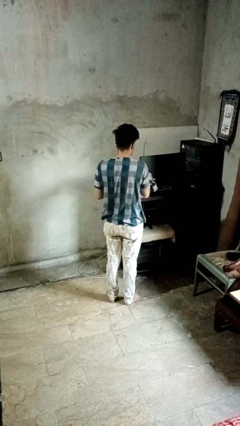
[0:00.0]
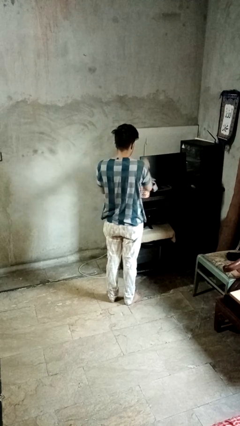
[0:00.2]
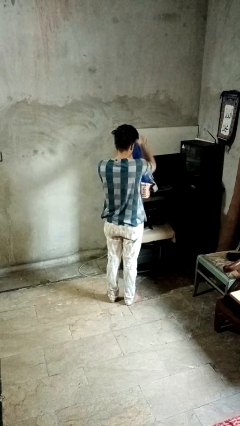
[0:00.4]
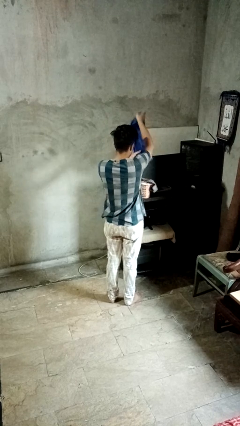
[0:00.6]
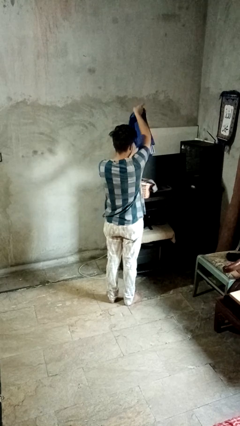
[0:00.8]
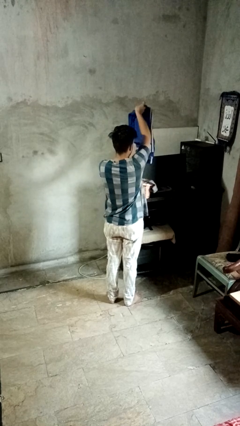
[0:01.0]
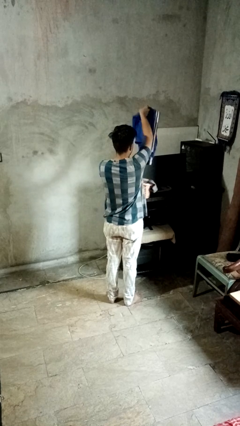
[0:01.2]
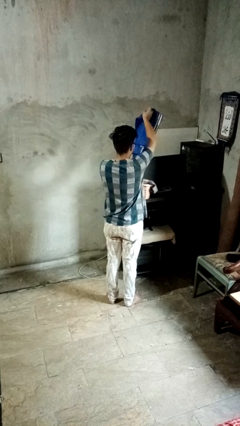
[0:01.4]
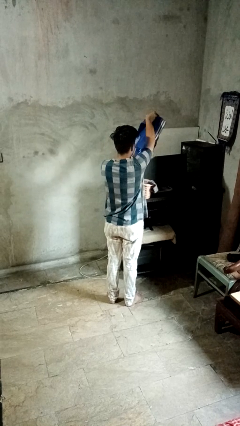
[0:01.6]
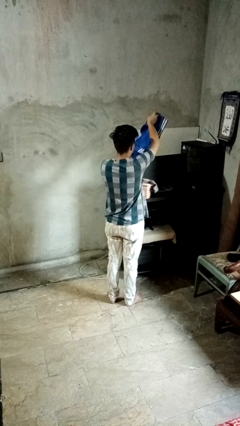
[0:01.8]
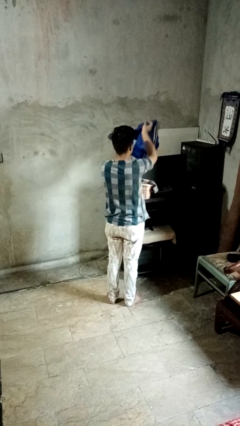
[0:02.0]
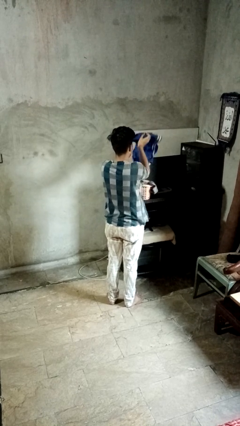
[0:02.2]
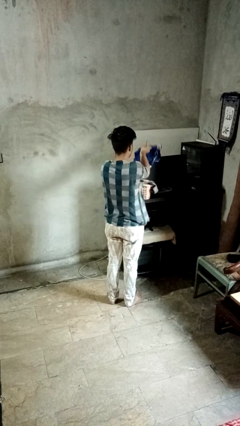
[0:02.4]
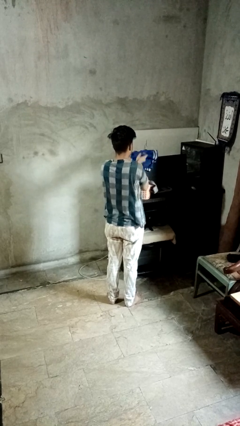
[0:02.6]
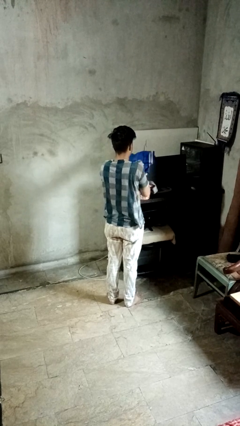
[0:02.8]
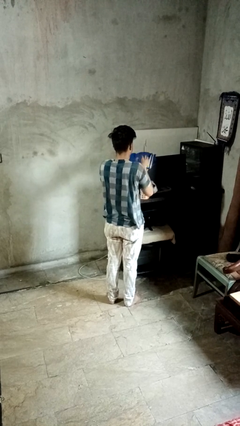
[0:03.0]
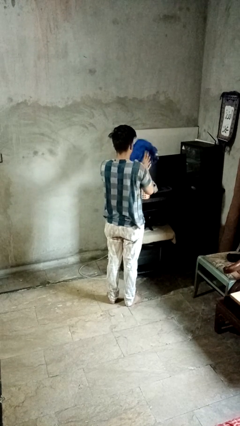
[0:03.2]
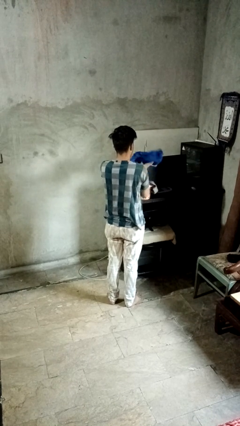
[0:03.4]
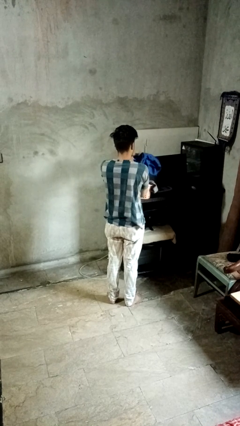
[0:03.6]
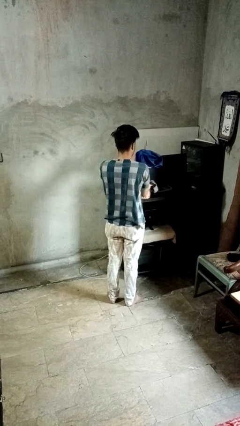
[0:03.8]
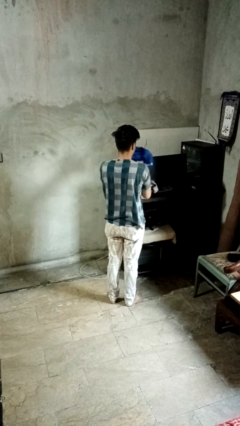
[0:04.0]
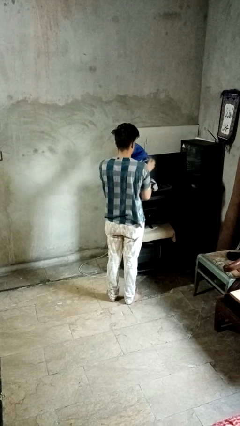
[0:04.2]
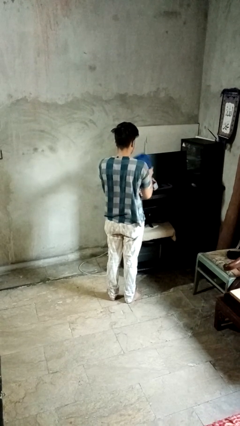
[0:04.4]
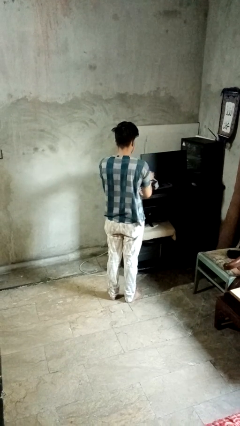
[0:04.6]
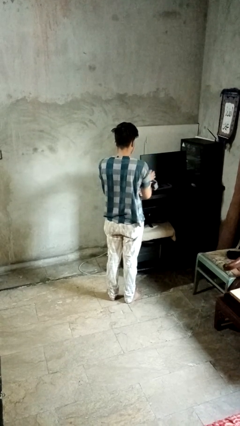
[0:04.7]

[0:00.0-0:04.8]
person folds pants

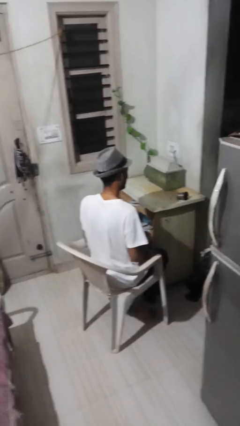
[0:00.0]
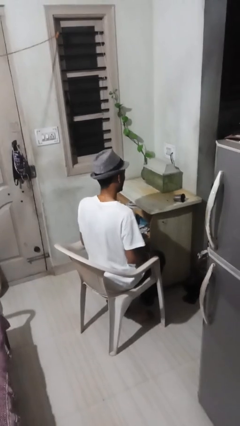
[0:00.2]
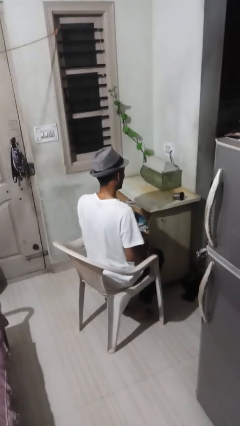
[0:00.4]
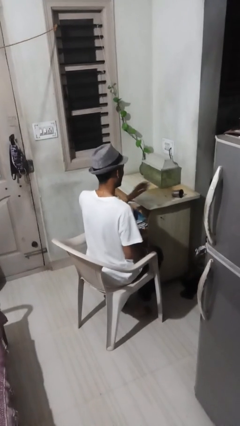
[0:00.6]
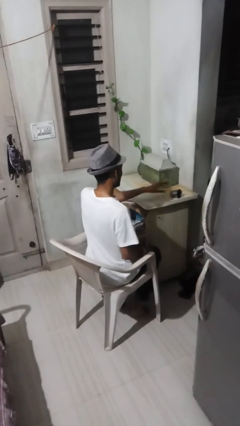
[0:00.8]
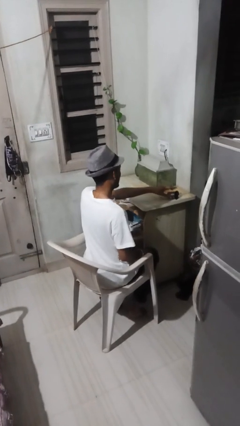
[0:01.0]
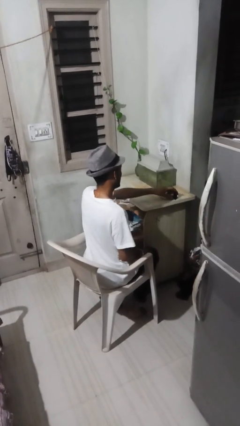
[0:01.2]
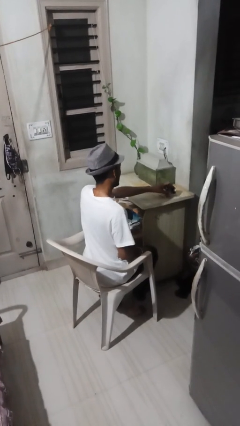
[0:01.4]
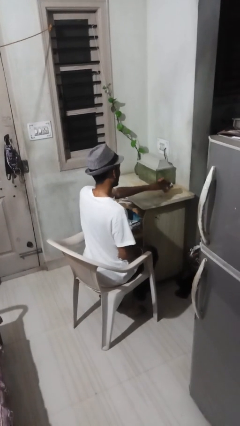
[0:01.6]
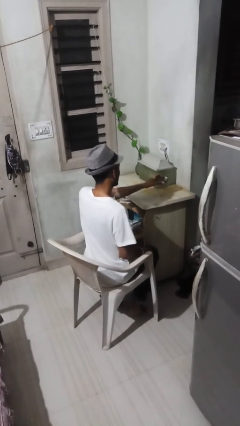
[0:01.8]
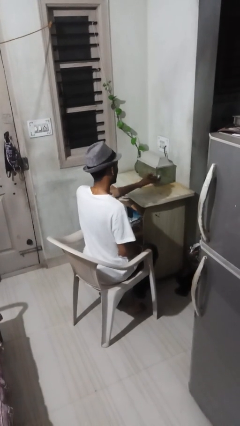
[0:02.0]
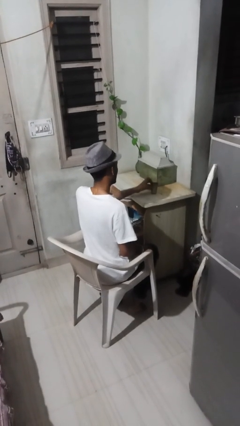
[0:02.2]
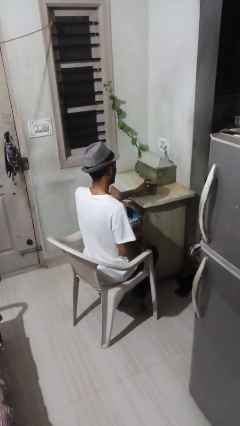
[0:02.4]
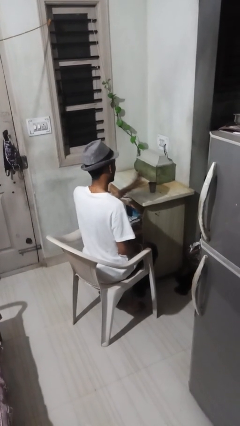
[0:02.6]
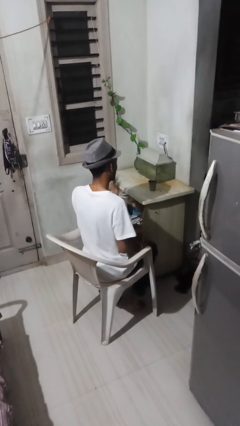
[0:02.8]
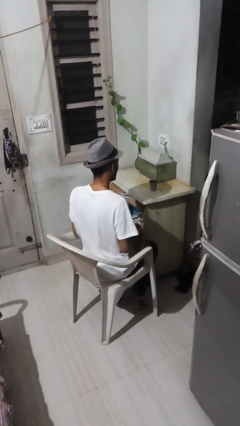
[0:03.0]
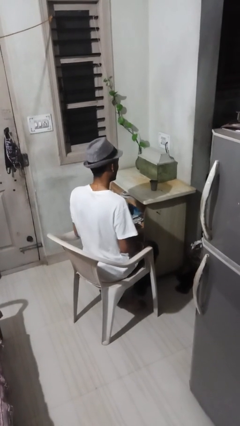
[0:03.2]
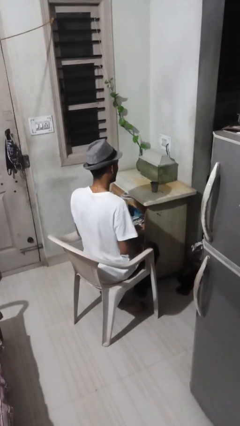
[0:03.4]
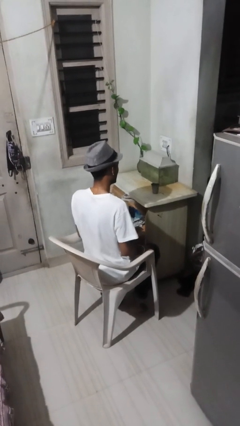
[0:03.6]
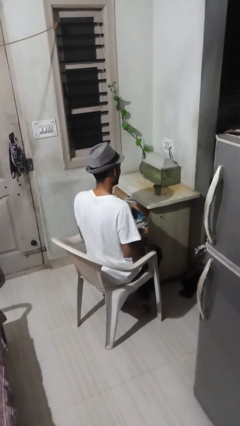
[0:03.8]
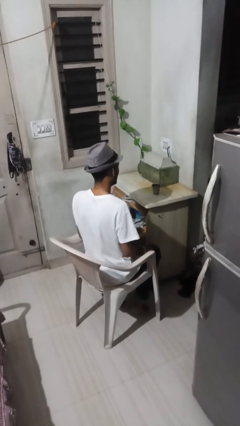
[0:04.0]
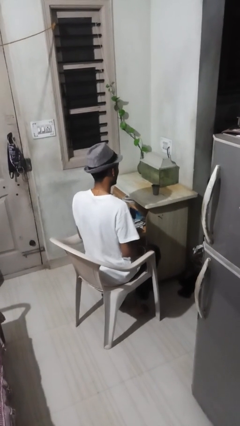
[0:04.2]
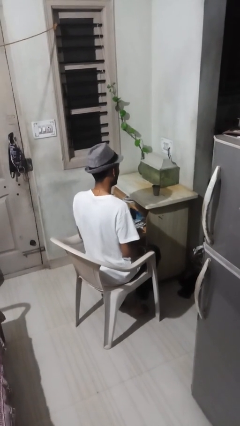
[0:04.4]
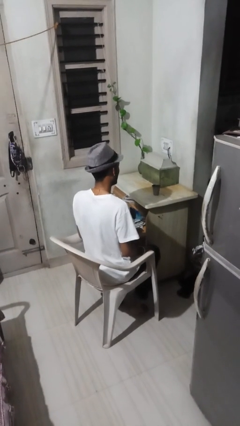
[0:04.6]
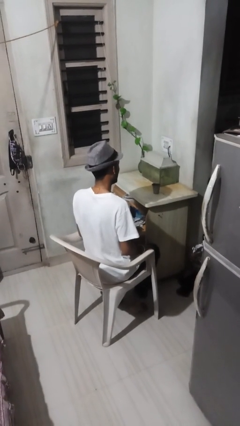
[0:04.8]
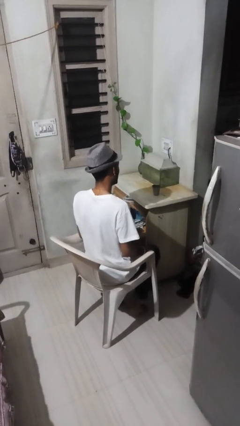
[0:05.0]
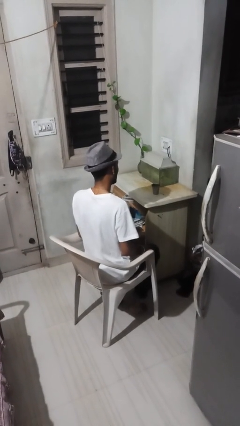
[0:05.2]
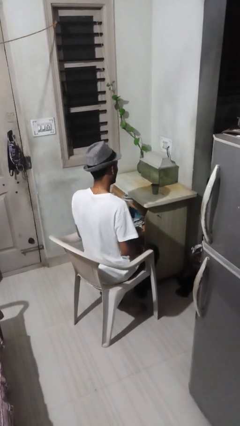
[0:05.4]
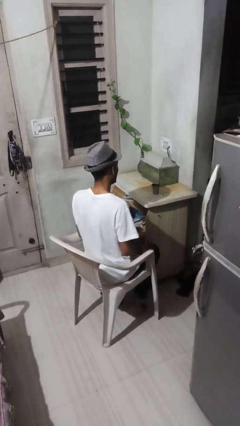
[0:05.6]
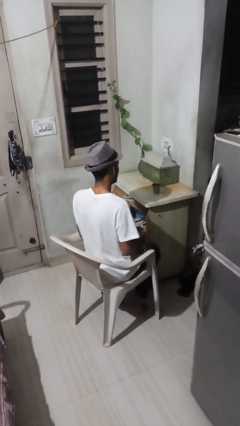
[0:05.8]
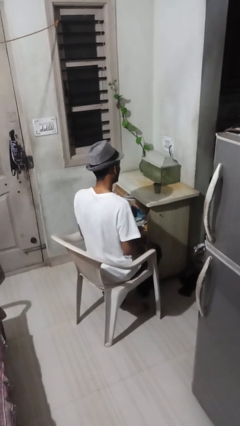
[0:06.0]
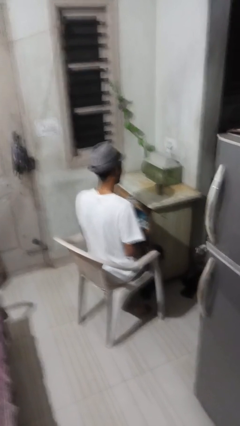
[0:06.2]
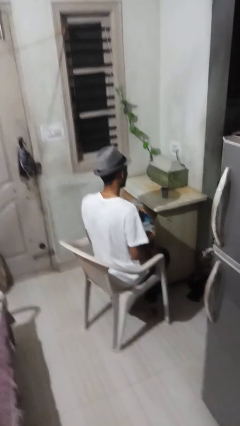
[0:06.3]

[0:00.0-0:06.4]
person sets upright glass

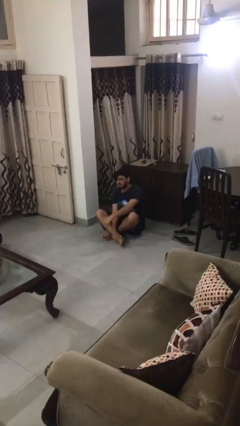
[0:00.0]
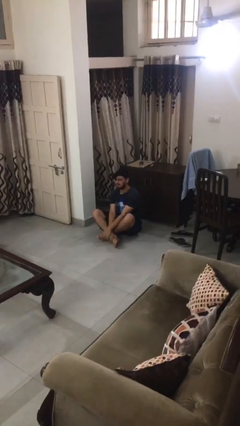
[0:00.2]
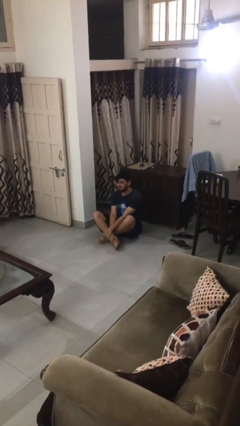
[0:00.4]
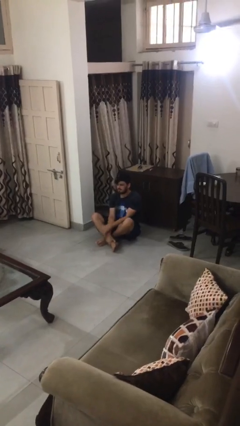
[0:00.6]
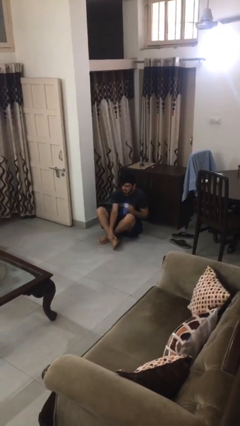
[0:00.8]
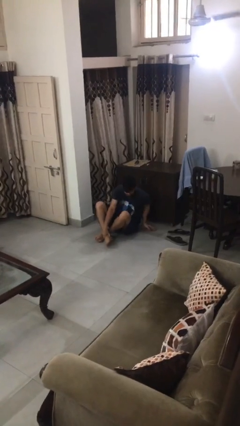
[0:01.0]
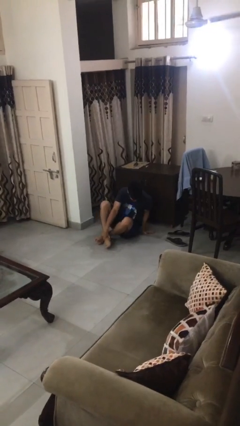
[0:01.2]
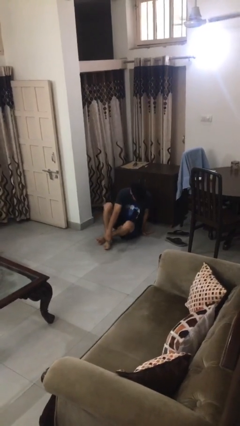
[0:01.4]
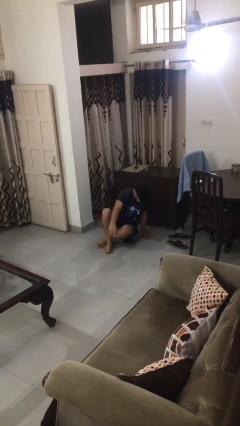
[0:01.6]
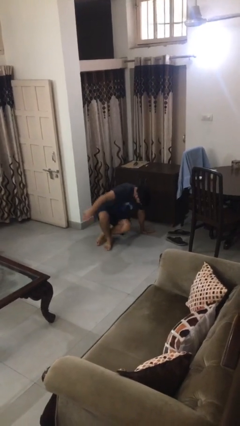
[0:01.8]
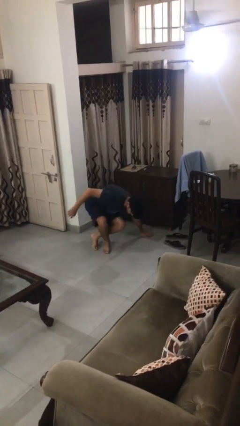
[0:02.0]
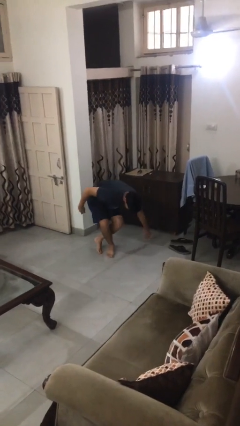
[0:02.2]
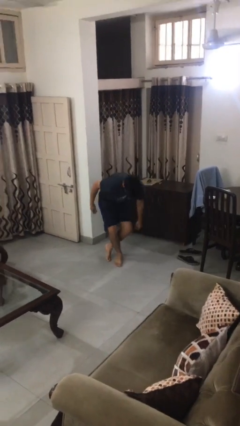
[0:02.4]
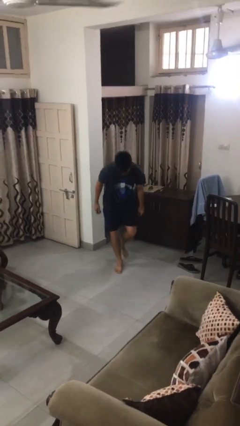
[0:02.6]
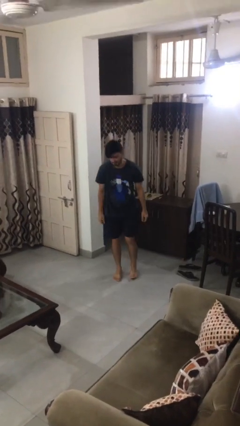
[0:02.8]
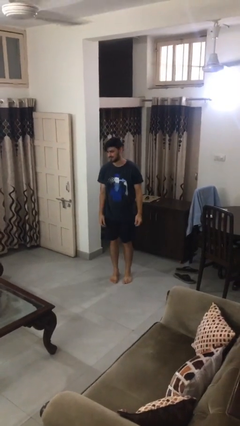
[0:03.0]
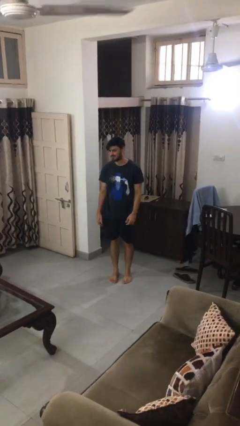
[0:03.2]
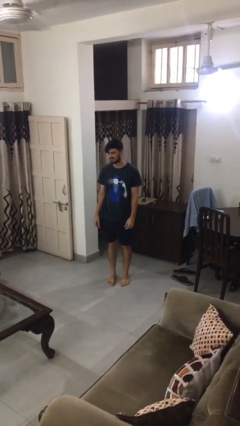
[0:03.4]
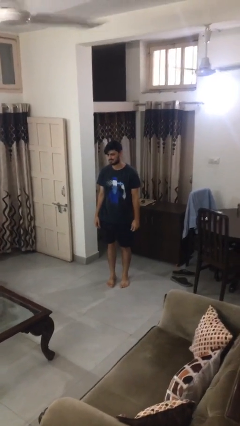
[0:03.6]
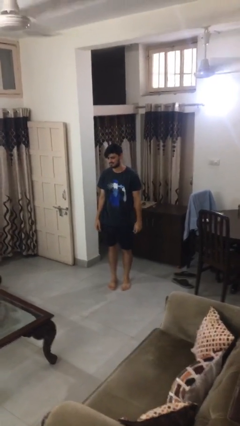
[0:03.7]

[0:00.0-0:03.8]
person stands up from floor

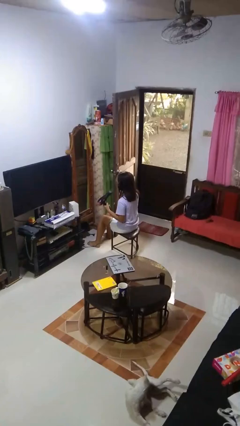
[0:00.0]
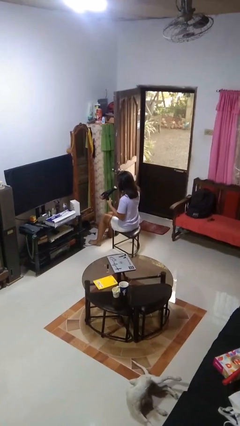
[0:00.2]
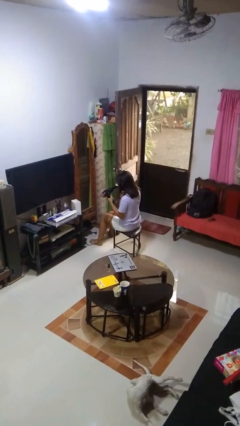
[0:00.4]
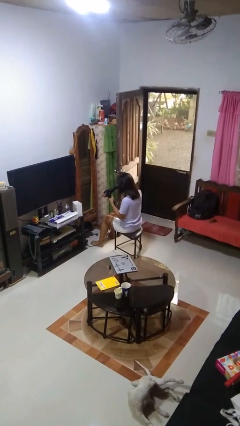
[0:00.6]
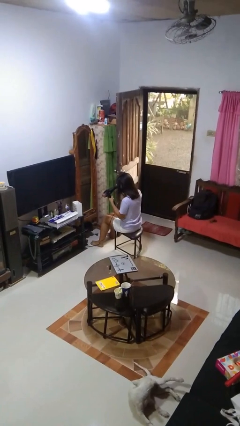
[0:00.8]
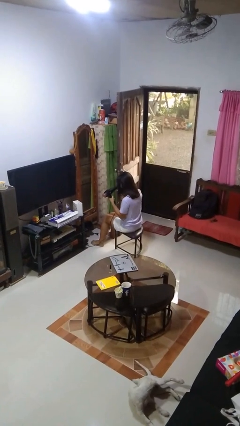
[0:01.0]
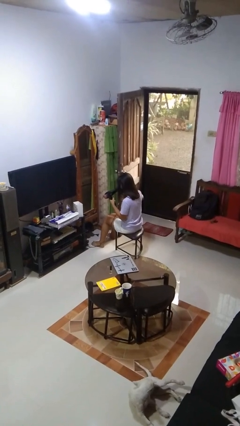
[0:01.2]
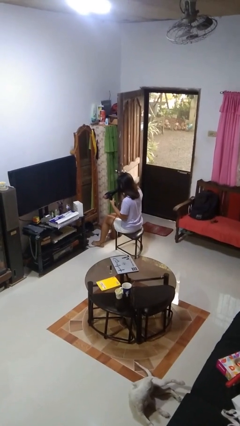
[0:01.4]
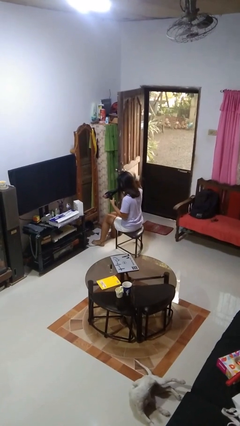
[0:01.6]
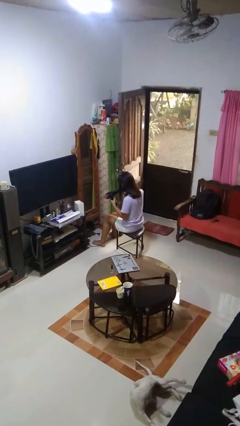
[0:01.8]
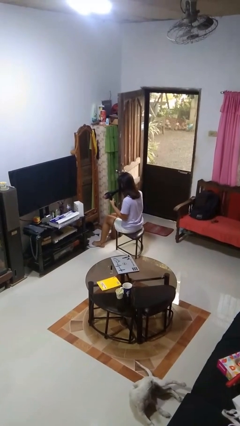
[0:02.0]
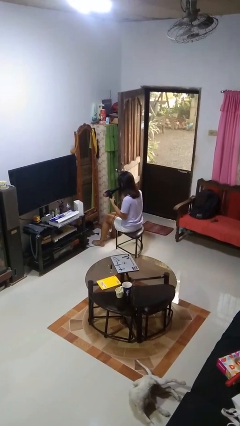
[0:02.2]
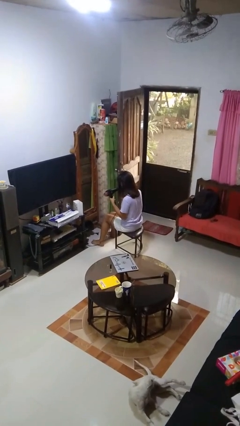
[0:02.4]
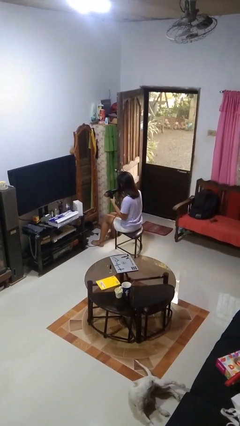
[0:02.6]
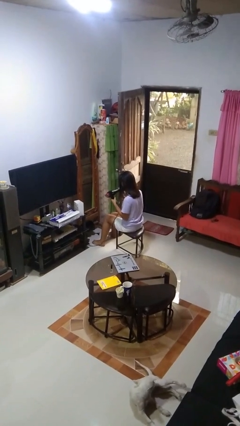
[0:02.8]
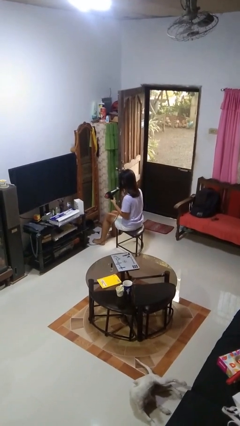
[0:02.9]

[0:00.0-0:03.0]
person dries hair with hairdryer
